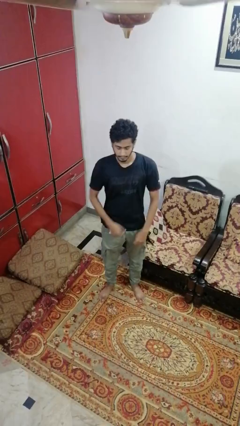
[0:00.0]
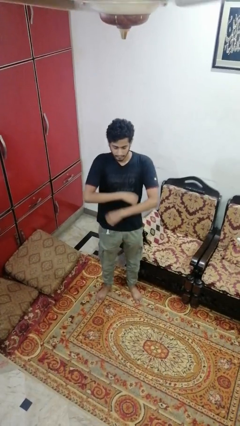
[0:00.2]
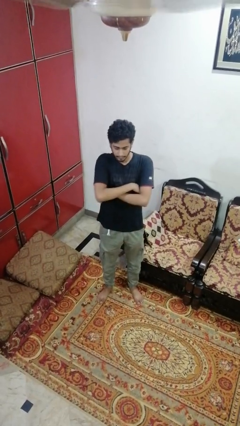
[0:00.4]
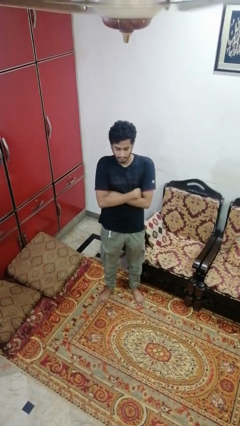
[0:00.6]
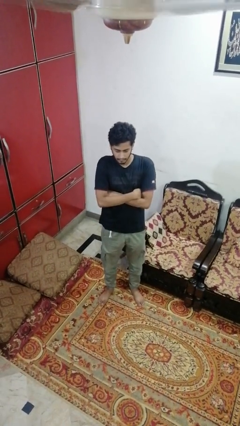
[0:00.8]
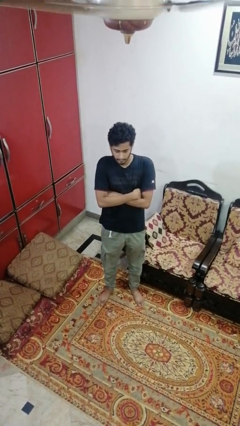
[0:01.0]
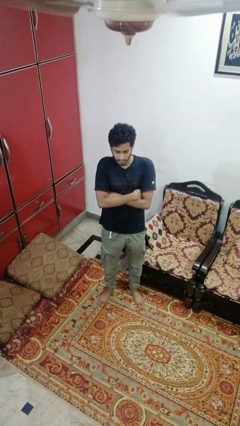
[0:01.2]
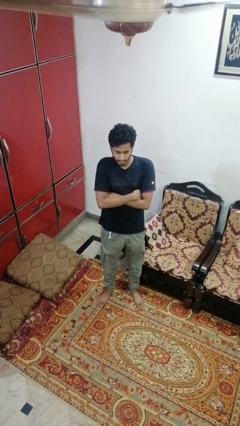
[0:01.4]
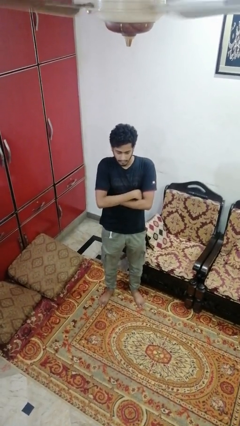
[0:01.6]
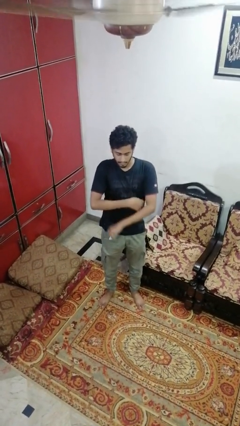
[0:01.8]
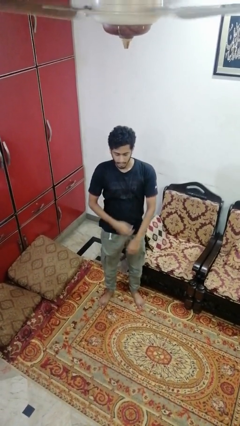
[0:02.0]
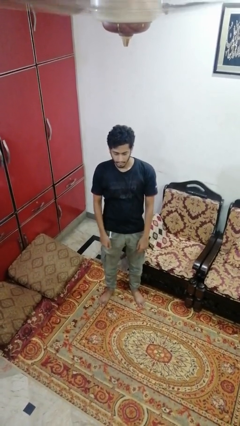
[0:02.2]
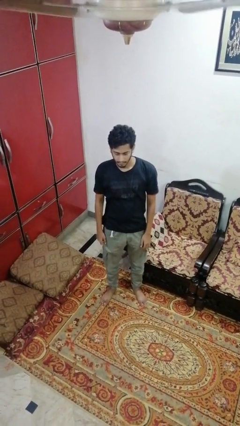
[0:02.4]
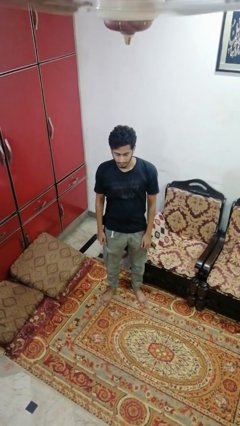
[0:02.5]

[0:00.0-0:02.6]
person crosses arms

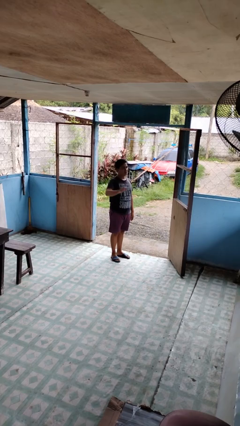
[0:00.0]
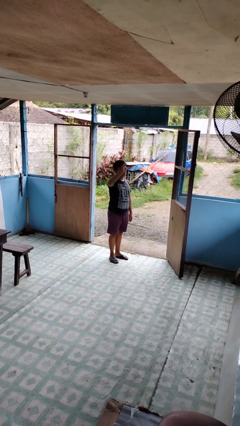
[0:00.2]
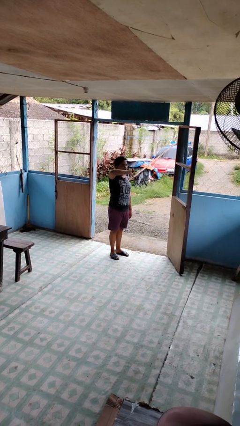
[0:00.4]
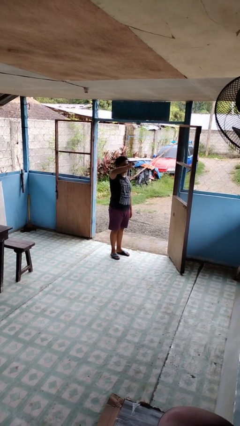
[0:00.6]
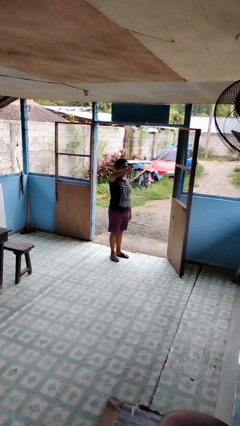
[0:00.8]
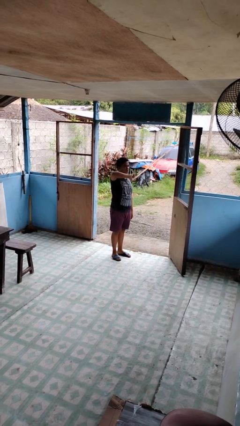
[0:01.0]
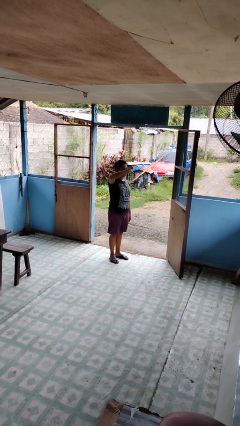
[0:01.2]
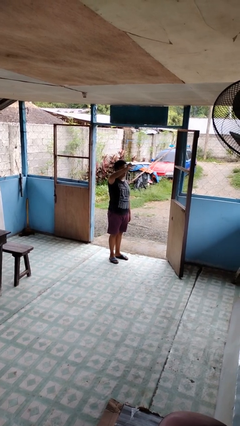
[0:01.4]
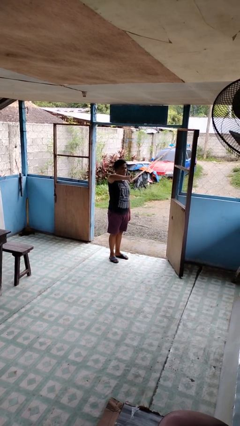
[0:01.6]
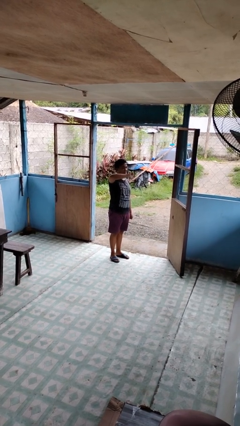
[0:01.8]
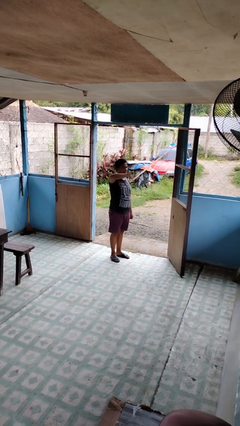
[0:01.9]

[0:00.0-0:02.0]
person gestures thumbs down

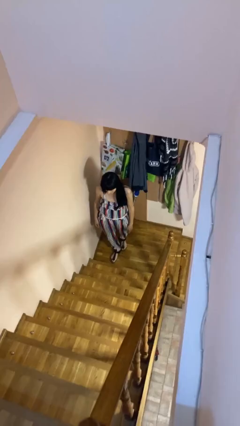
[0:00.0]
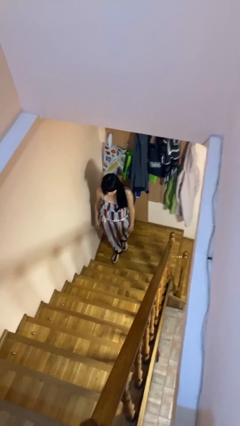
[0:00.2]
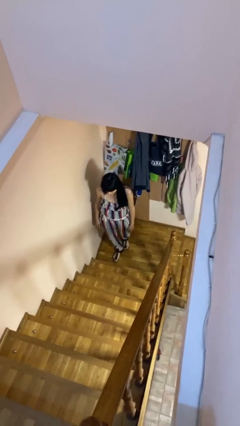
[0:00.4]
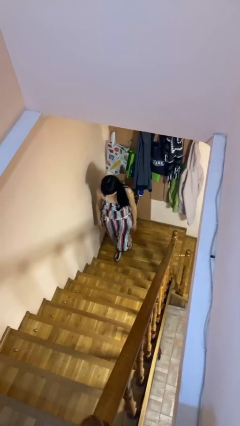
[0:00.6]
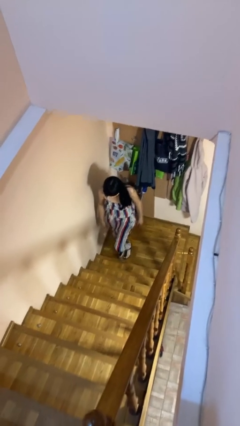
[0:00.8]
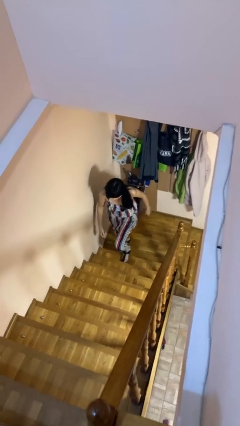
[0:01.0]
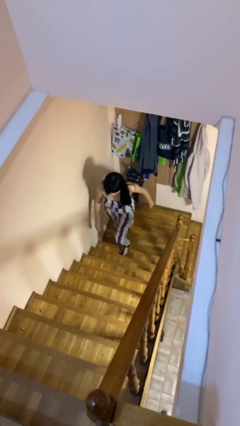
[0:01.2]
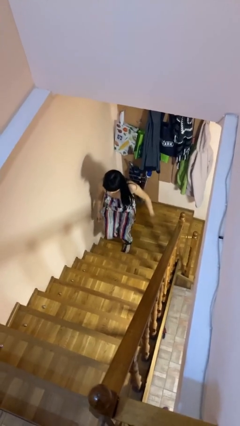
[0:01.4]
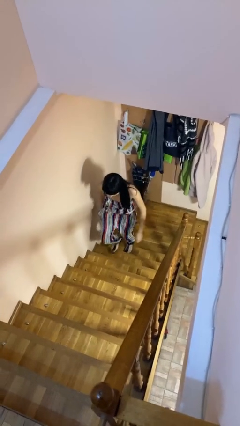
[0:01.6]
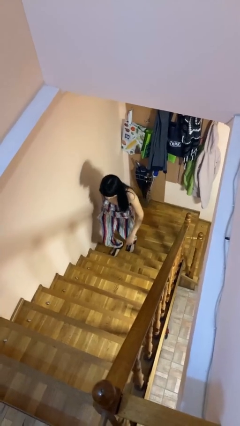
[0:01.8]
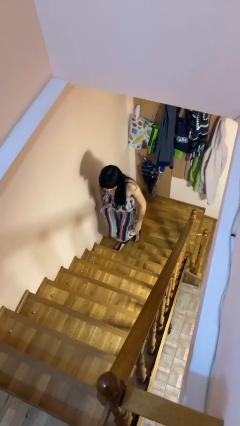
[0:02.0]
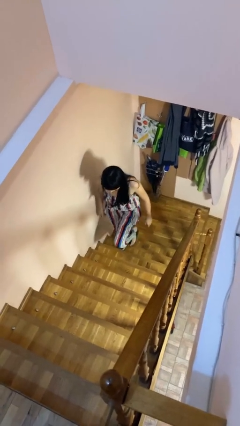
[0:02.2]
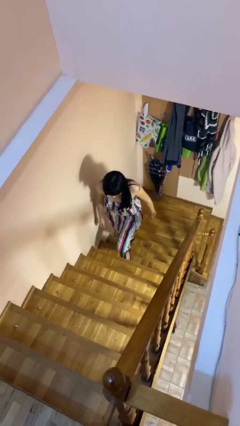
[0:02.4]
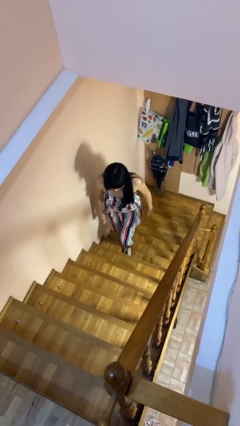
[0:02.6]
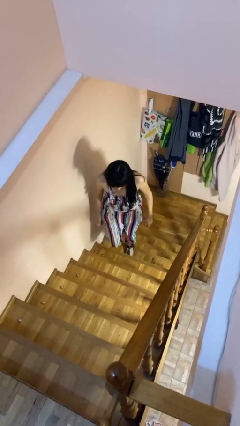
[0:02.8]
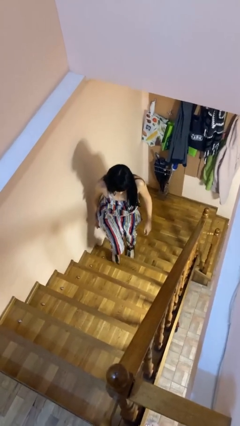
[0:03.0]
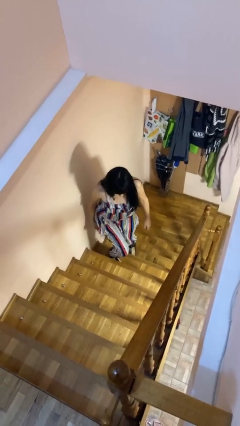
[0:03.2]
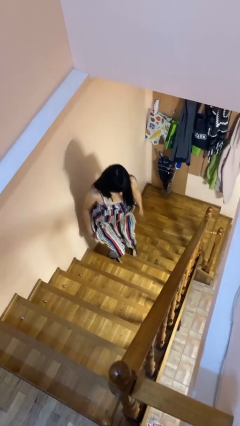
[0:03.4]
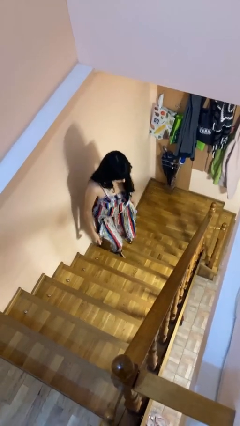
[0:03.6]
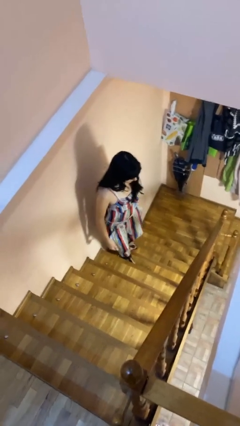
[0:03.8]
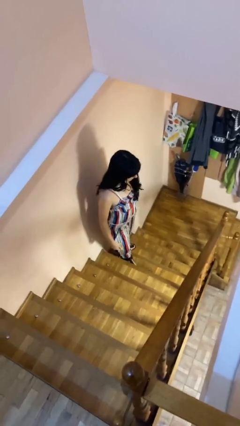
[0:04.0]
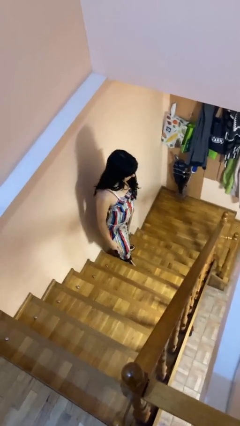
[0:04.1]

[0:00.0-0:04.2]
person climbs up stairs

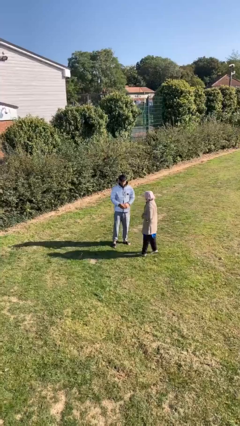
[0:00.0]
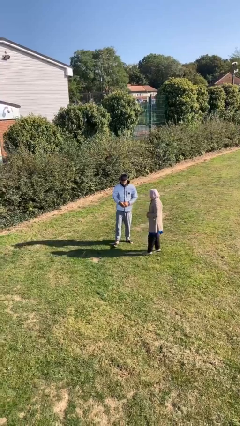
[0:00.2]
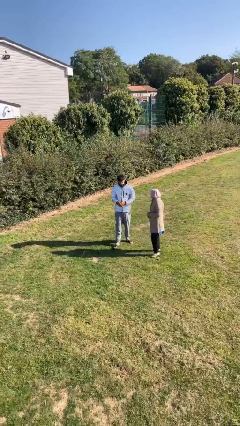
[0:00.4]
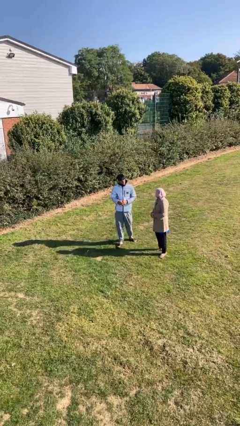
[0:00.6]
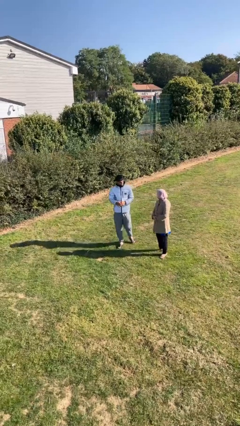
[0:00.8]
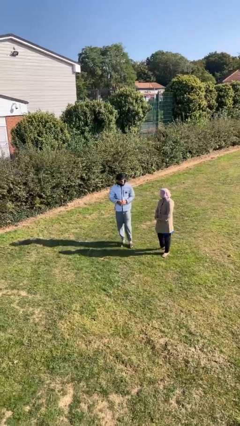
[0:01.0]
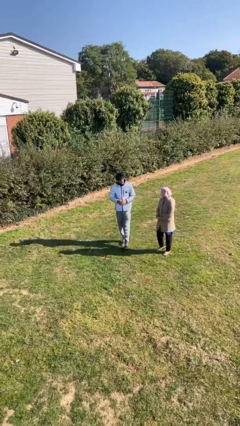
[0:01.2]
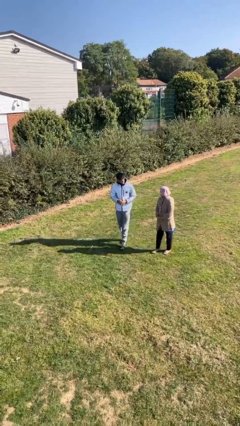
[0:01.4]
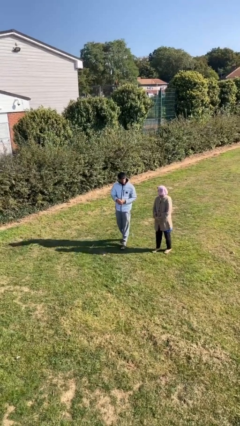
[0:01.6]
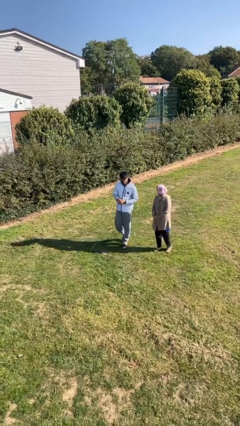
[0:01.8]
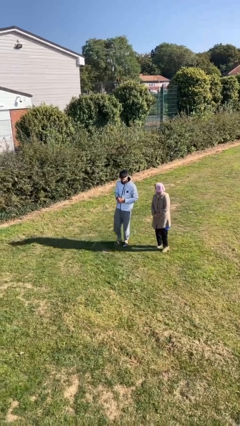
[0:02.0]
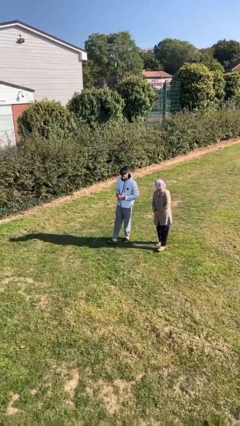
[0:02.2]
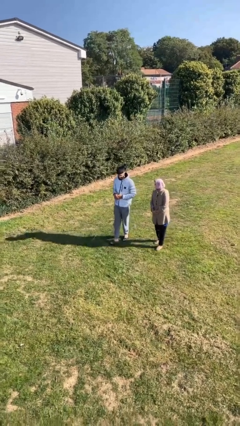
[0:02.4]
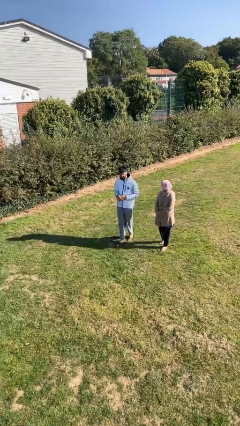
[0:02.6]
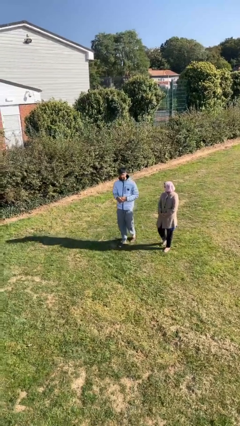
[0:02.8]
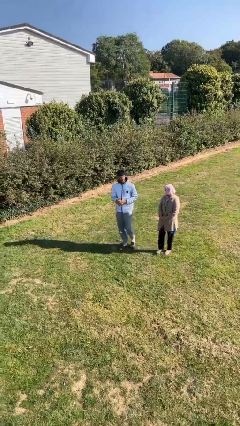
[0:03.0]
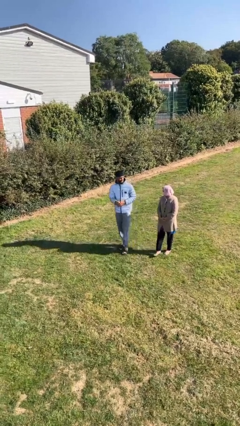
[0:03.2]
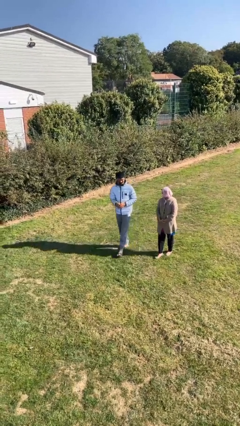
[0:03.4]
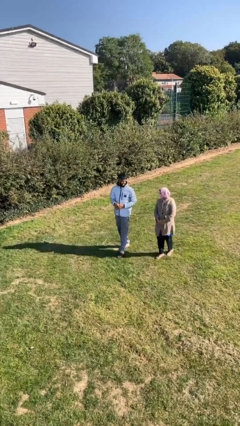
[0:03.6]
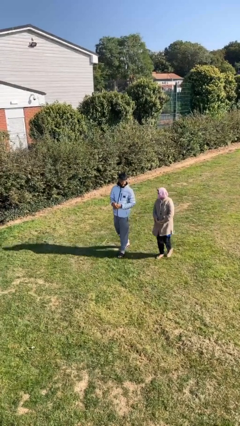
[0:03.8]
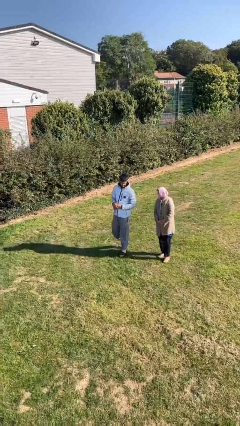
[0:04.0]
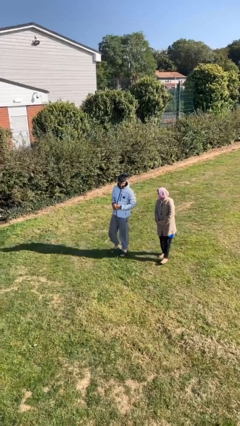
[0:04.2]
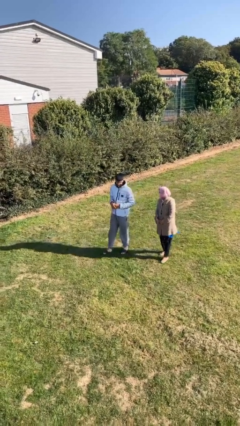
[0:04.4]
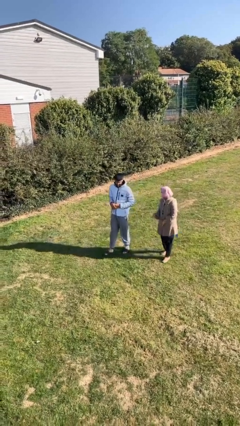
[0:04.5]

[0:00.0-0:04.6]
person talks to person

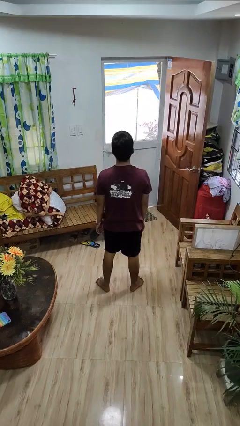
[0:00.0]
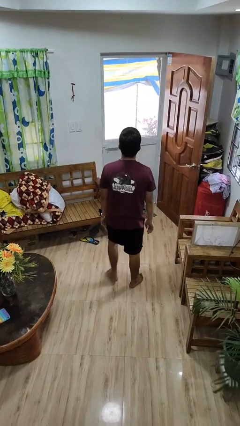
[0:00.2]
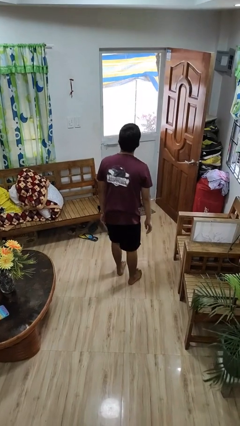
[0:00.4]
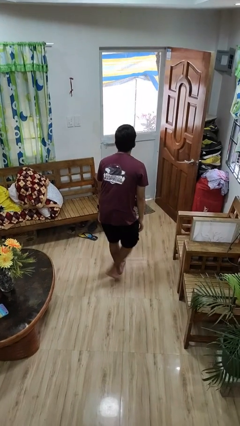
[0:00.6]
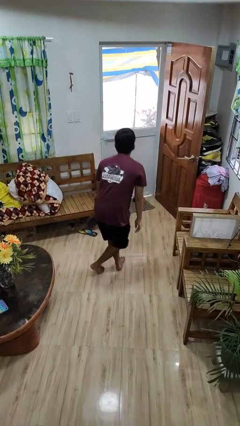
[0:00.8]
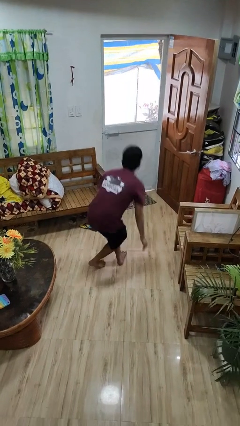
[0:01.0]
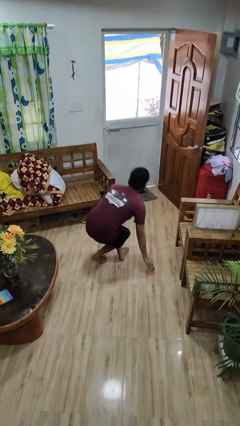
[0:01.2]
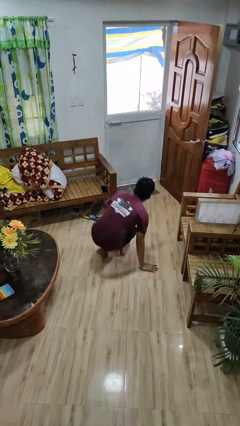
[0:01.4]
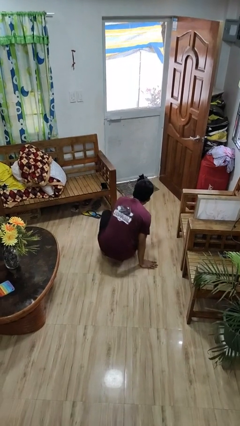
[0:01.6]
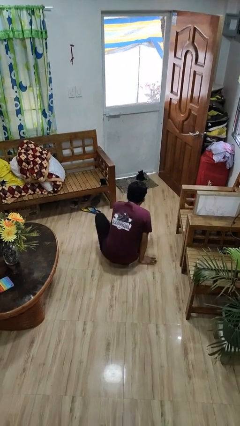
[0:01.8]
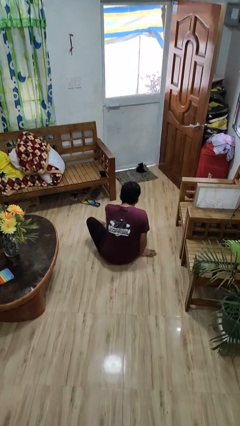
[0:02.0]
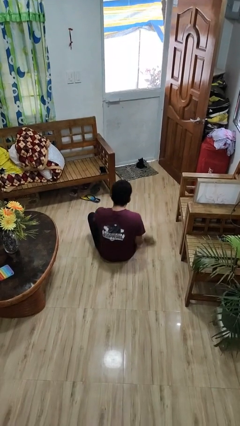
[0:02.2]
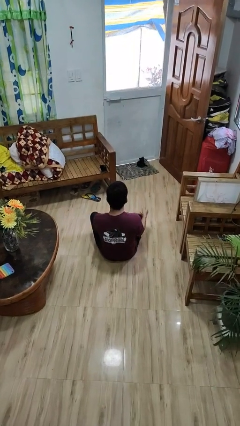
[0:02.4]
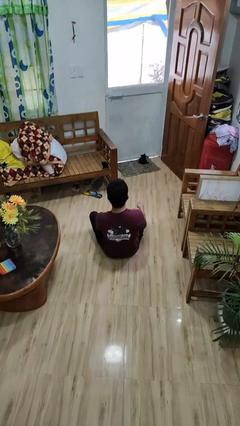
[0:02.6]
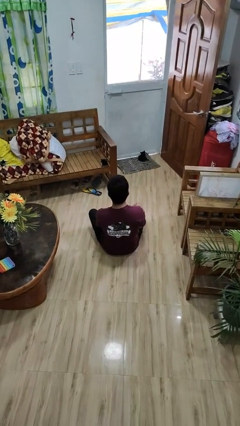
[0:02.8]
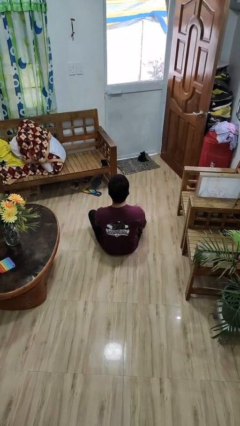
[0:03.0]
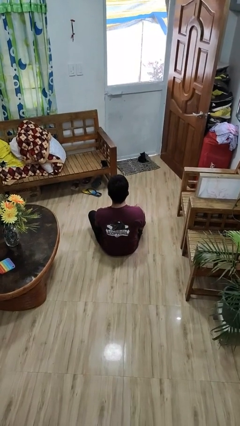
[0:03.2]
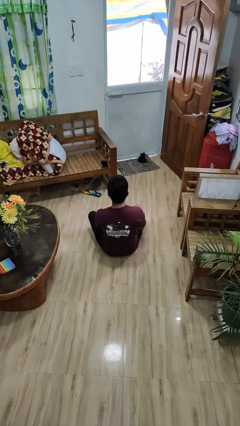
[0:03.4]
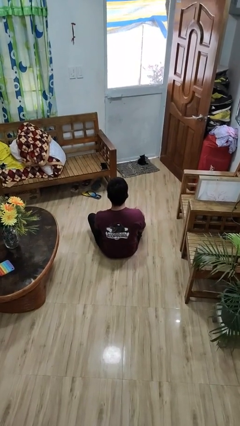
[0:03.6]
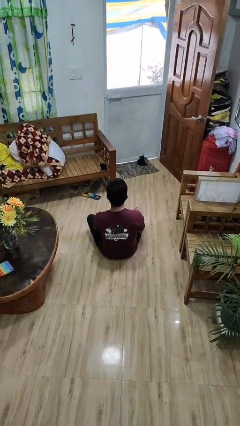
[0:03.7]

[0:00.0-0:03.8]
person sits crisscross

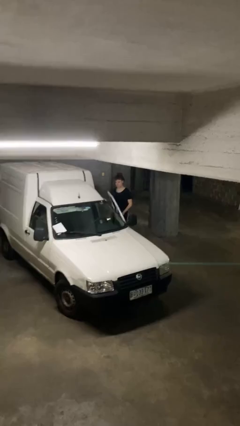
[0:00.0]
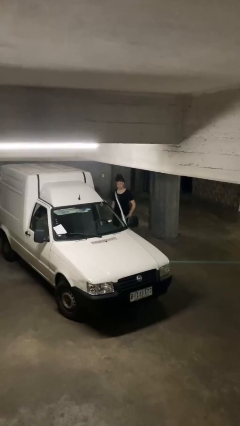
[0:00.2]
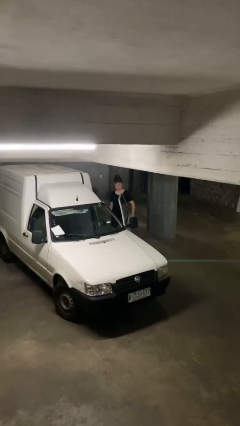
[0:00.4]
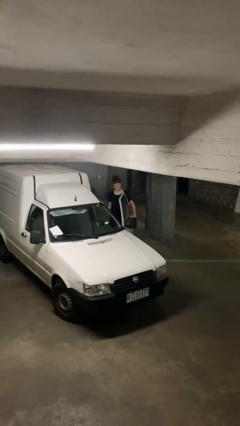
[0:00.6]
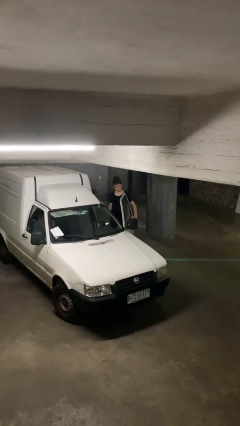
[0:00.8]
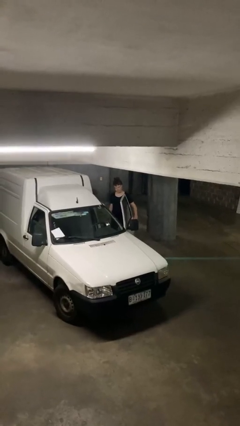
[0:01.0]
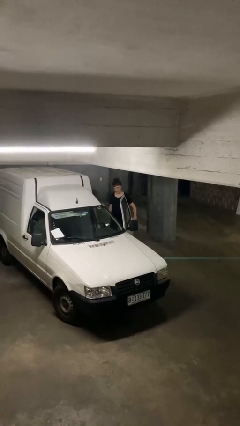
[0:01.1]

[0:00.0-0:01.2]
person opens car door
